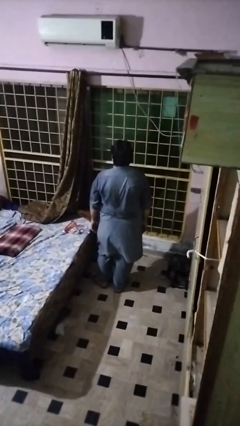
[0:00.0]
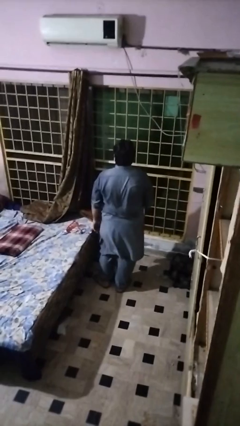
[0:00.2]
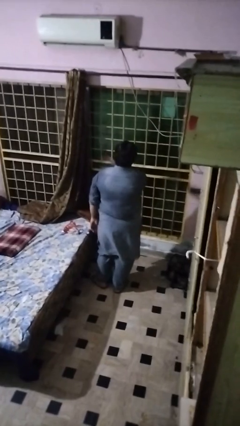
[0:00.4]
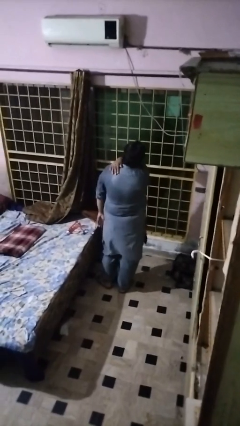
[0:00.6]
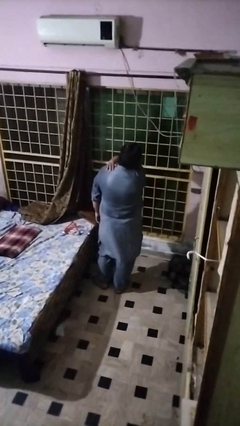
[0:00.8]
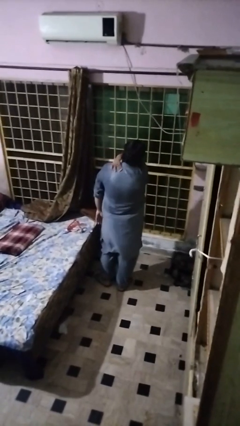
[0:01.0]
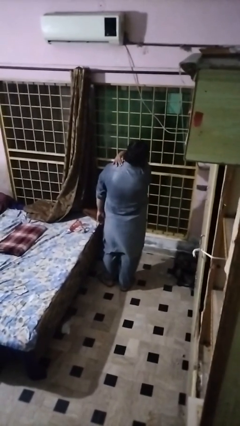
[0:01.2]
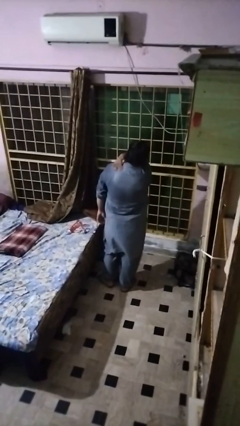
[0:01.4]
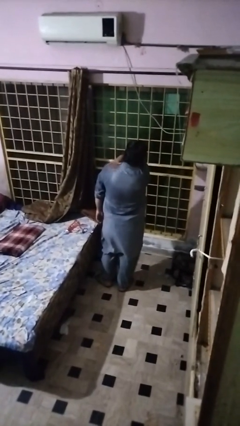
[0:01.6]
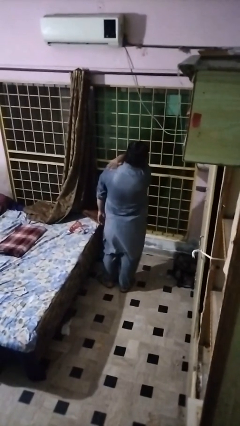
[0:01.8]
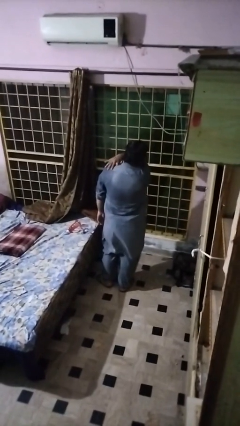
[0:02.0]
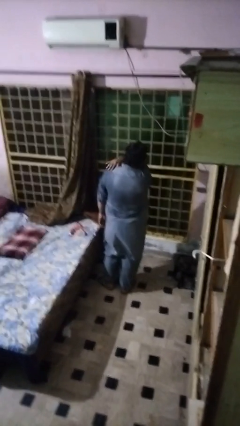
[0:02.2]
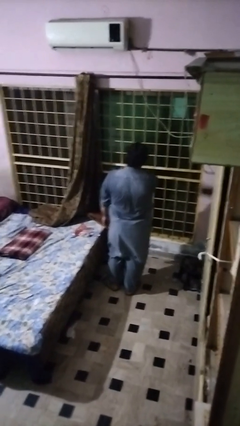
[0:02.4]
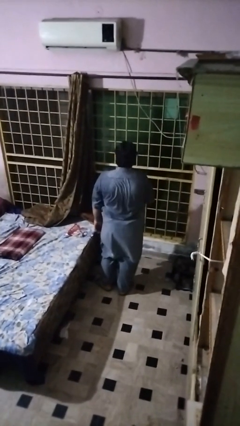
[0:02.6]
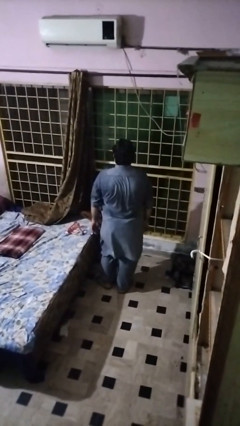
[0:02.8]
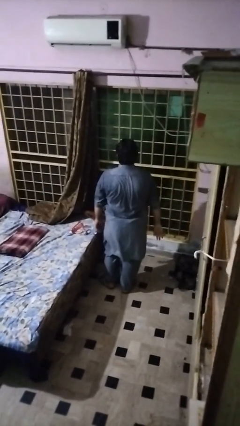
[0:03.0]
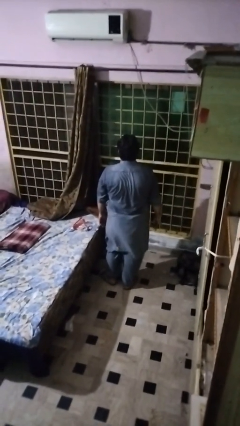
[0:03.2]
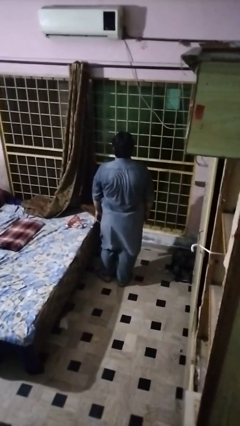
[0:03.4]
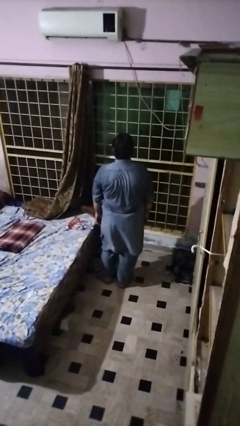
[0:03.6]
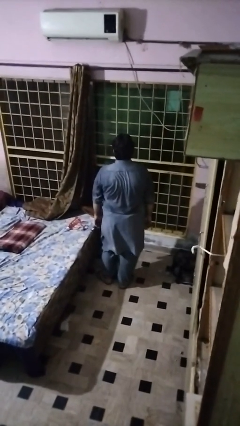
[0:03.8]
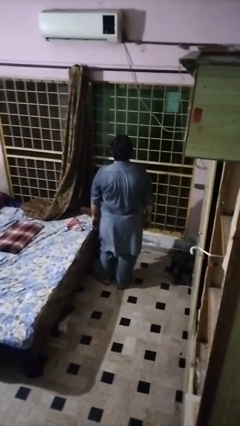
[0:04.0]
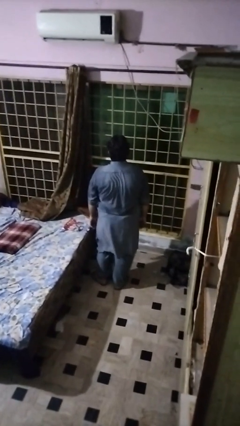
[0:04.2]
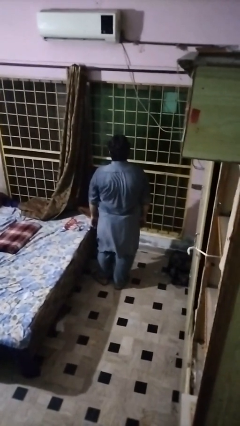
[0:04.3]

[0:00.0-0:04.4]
person swats bug

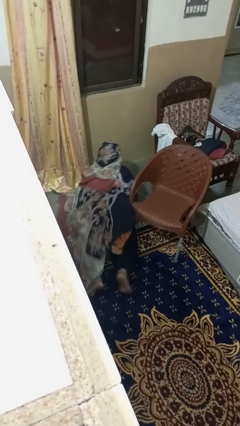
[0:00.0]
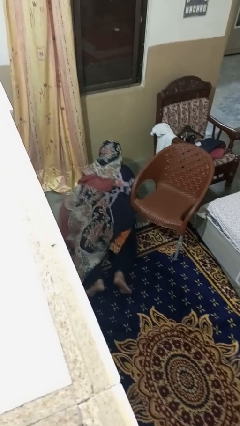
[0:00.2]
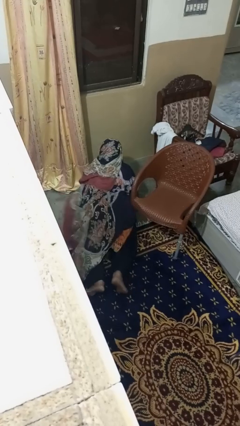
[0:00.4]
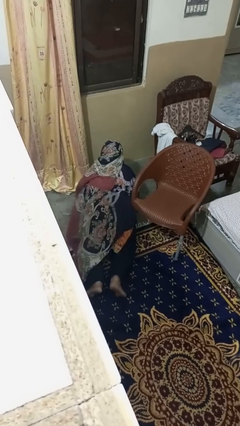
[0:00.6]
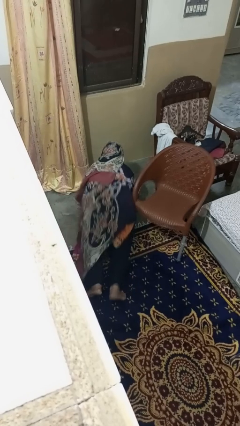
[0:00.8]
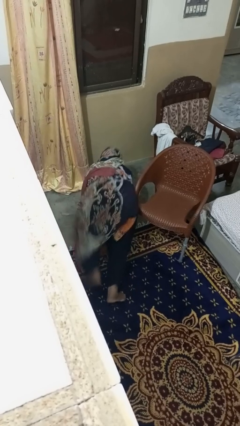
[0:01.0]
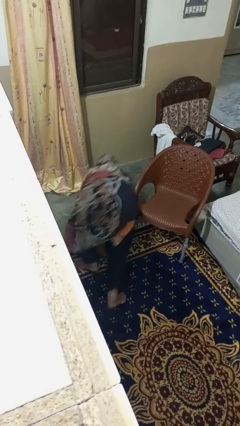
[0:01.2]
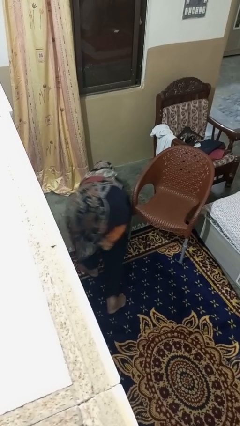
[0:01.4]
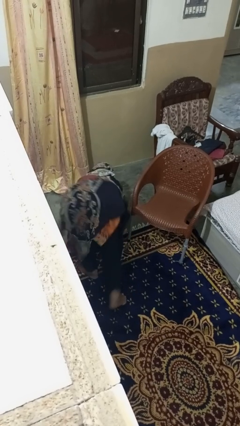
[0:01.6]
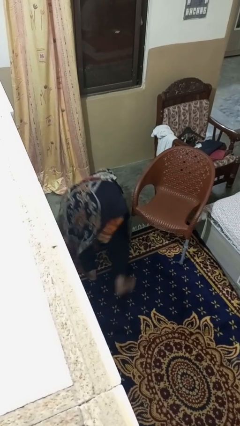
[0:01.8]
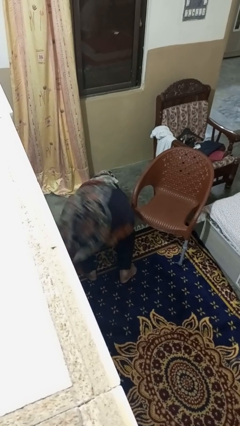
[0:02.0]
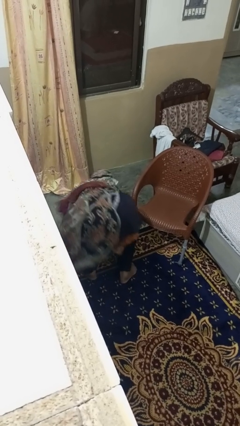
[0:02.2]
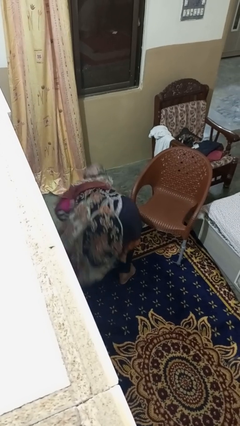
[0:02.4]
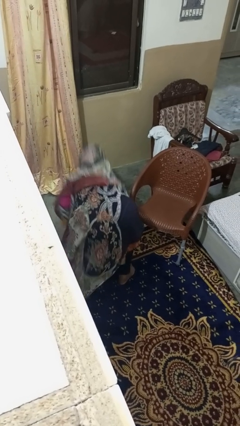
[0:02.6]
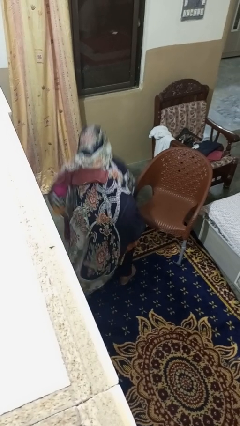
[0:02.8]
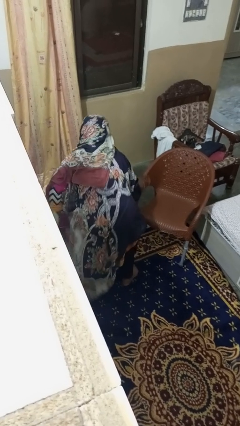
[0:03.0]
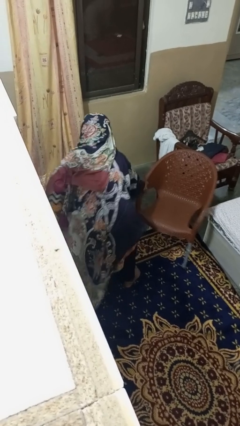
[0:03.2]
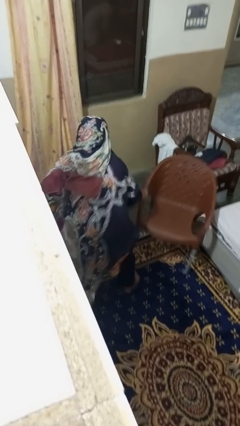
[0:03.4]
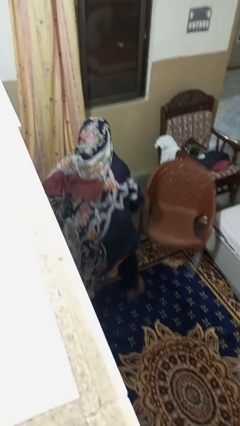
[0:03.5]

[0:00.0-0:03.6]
person stands up from floor

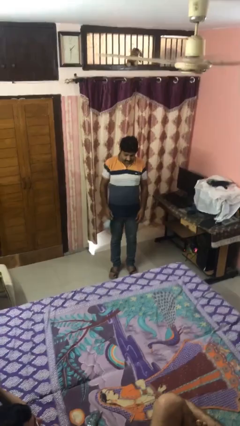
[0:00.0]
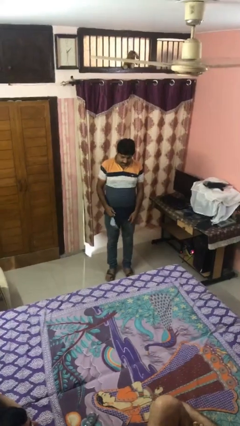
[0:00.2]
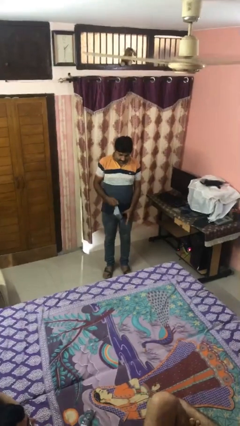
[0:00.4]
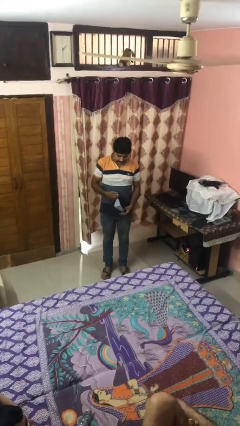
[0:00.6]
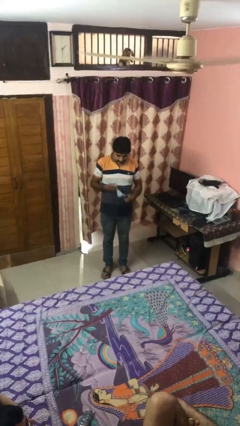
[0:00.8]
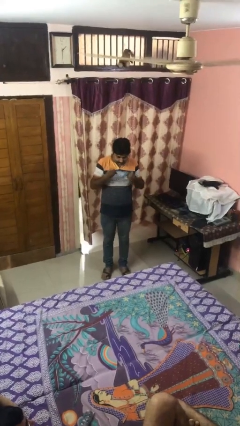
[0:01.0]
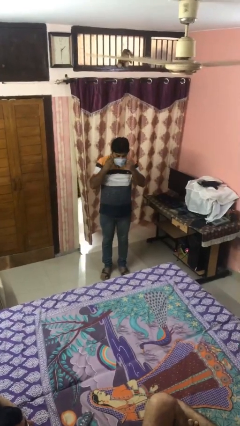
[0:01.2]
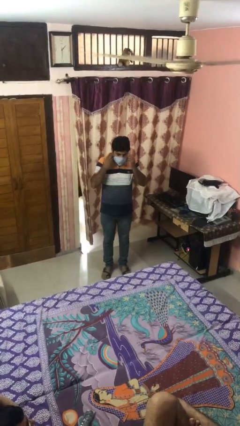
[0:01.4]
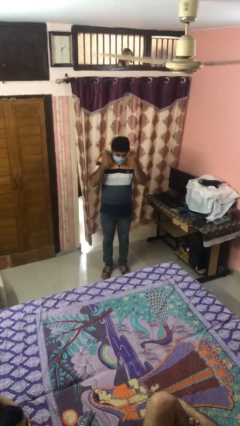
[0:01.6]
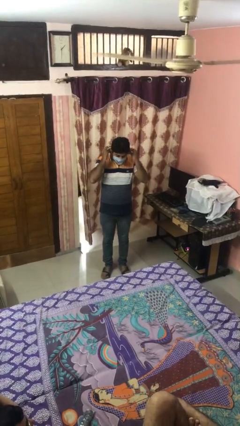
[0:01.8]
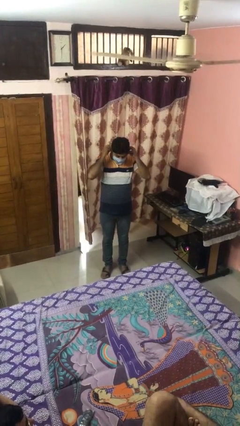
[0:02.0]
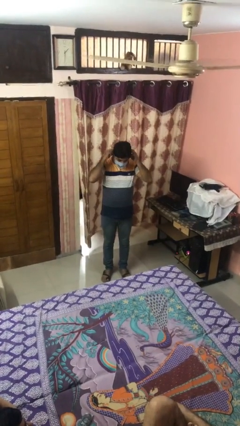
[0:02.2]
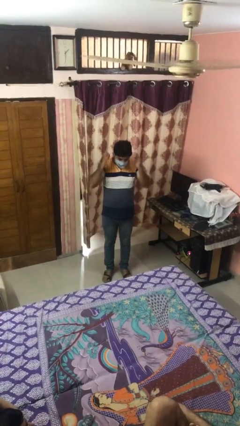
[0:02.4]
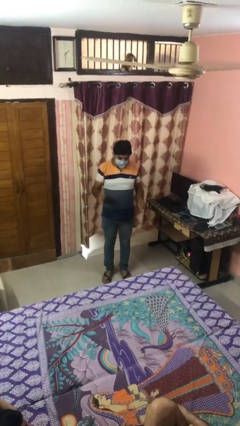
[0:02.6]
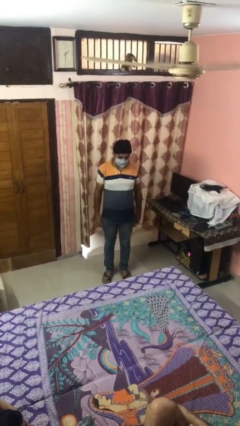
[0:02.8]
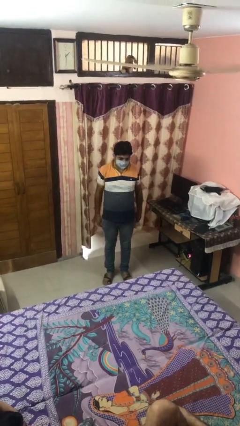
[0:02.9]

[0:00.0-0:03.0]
person puts on facemask

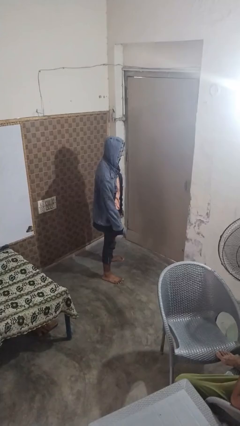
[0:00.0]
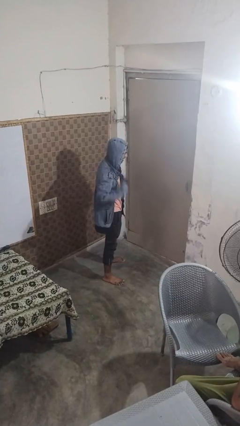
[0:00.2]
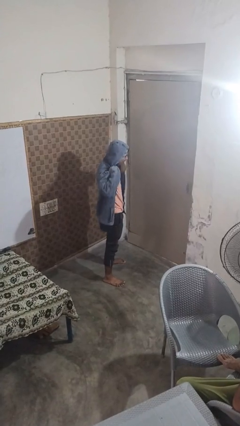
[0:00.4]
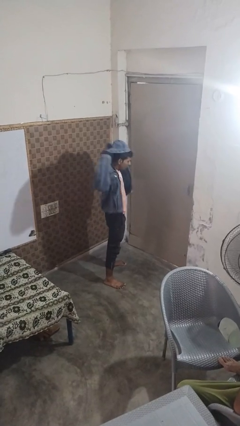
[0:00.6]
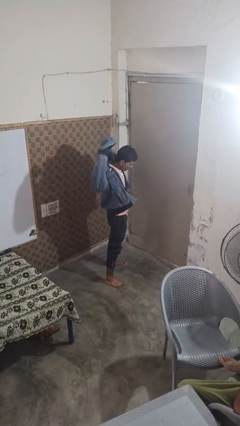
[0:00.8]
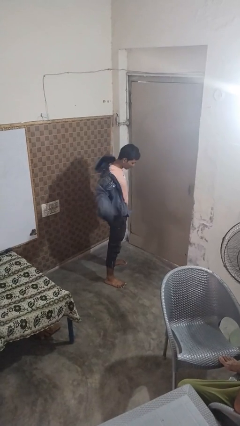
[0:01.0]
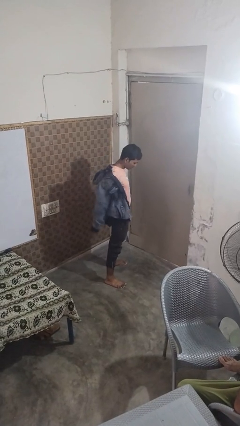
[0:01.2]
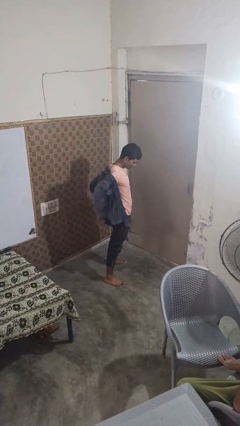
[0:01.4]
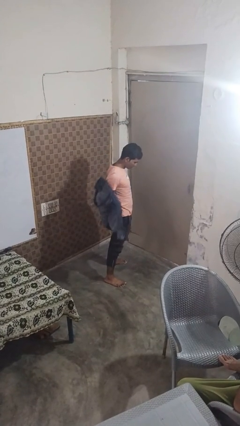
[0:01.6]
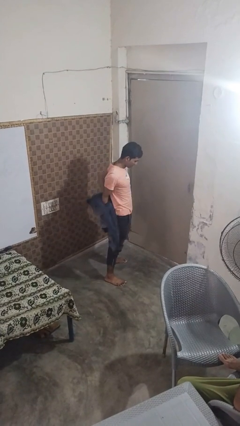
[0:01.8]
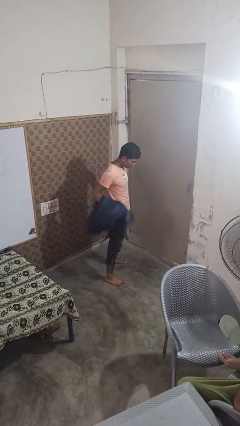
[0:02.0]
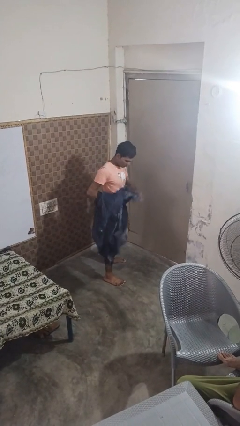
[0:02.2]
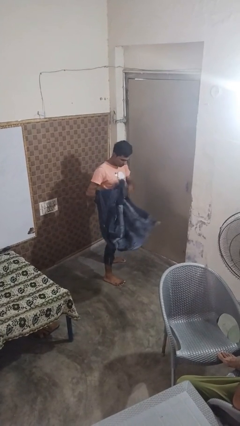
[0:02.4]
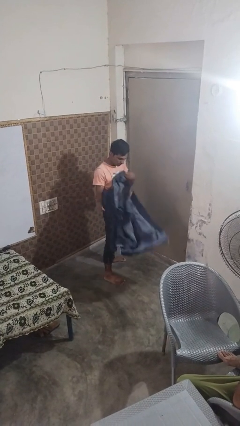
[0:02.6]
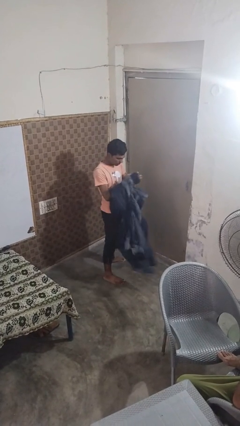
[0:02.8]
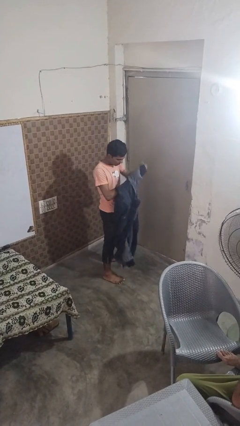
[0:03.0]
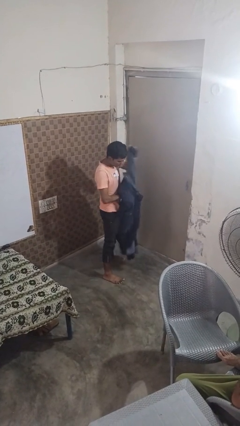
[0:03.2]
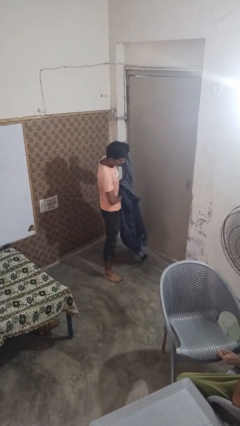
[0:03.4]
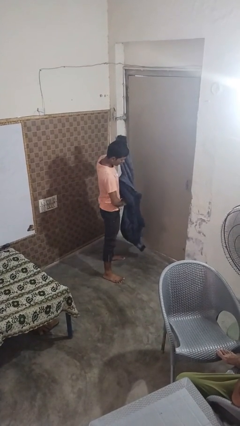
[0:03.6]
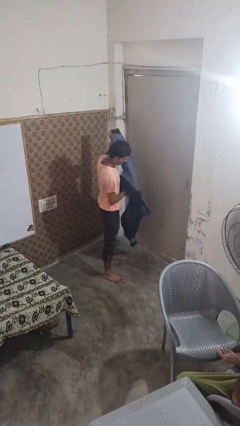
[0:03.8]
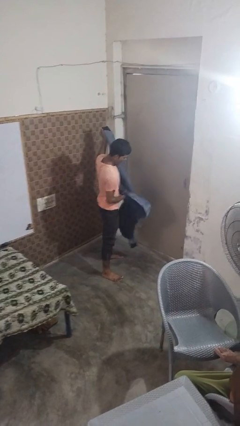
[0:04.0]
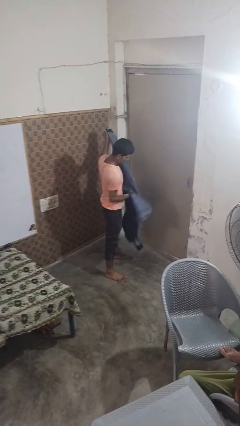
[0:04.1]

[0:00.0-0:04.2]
person takes off hoodie

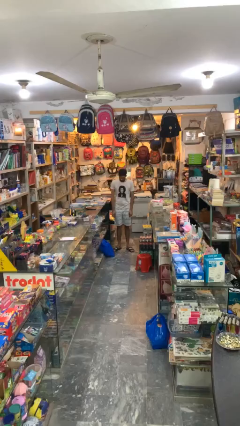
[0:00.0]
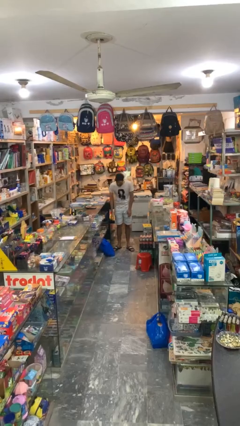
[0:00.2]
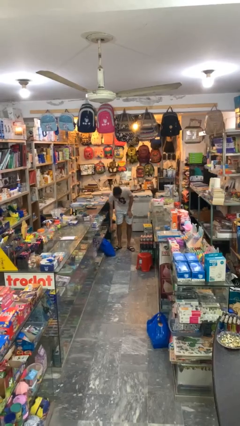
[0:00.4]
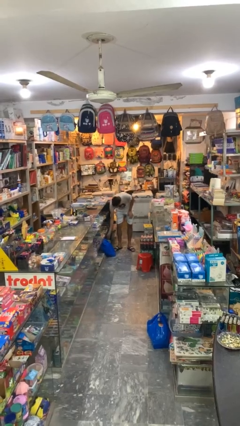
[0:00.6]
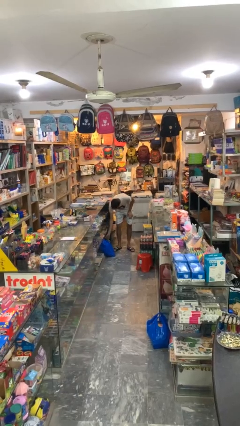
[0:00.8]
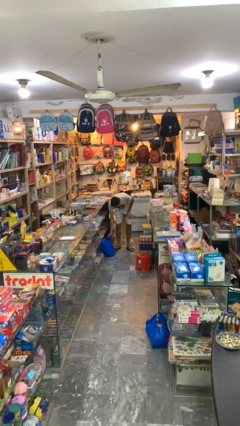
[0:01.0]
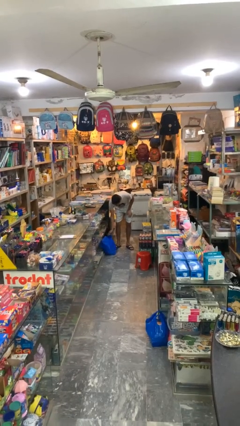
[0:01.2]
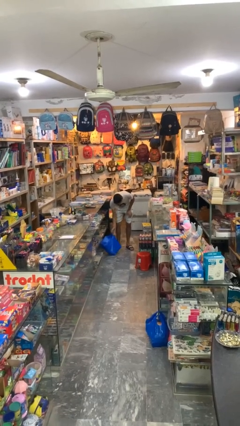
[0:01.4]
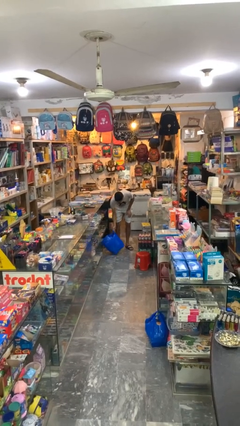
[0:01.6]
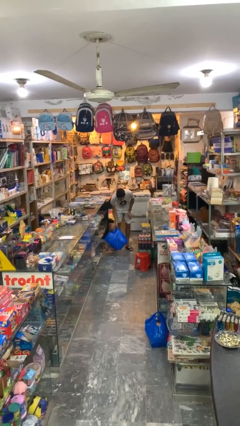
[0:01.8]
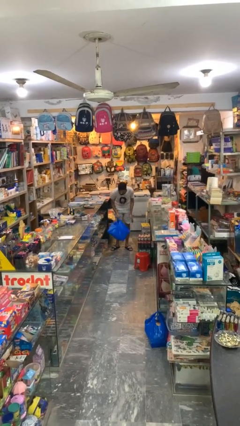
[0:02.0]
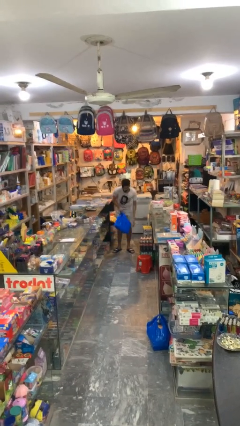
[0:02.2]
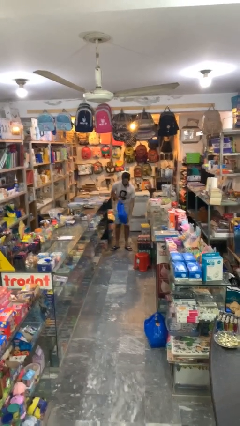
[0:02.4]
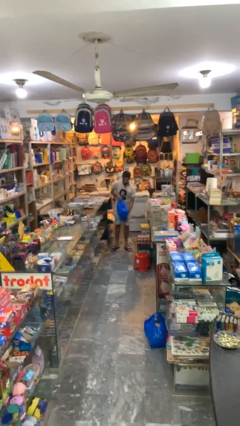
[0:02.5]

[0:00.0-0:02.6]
person picks up object from floor
